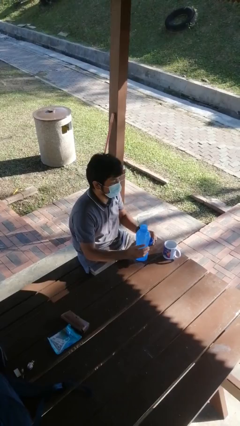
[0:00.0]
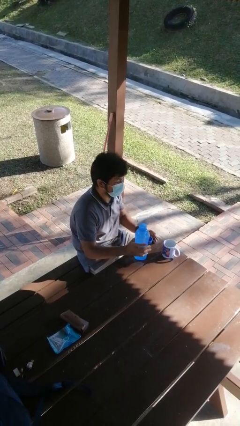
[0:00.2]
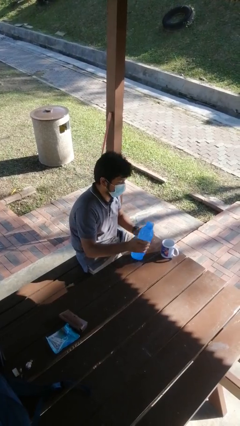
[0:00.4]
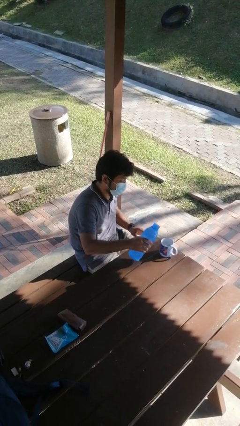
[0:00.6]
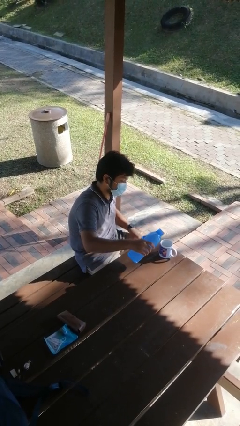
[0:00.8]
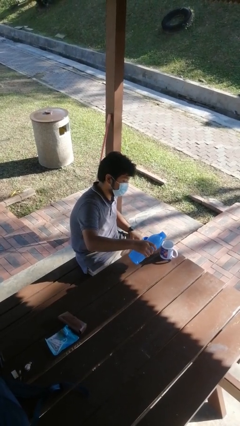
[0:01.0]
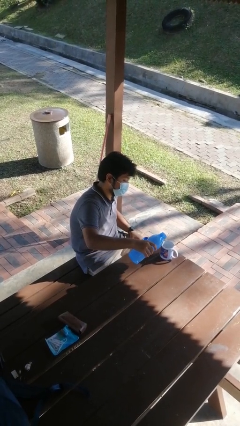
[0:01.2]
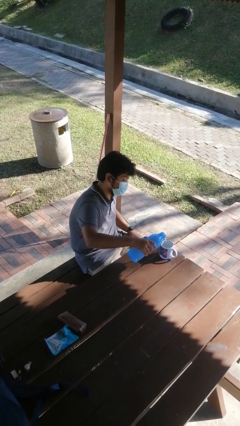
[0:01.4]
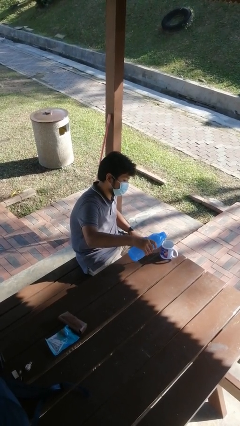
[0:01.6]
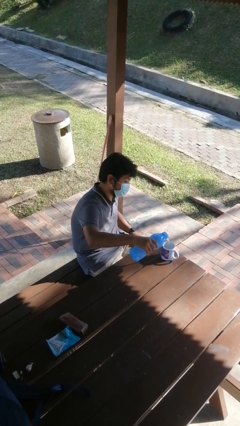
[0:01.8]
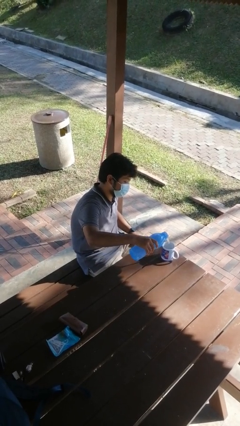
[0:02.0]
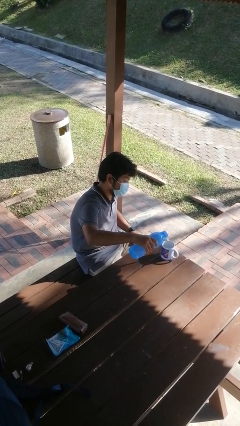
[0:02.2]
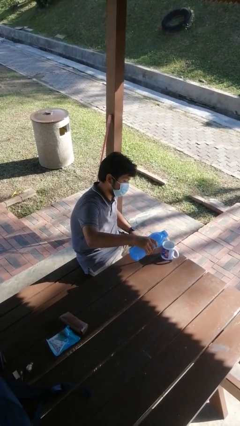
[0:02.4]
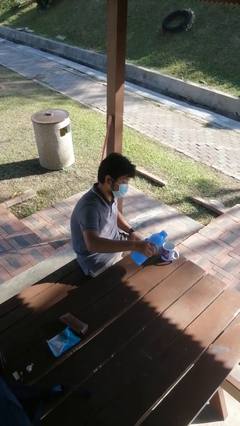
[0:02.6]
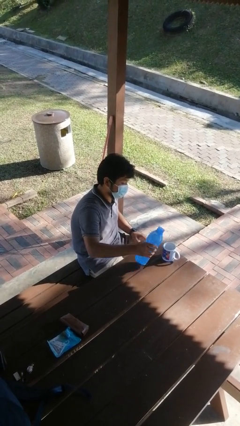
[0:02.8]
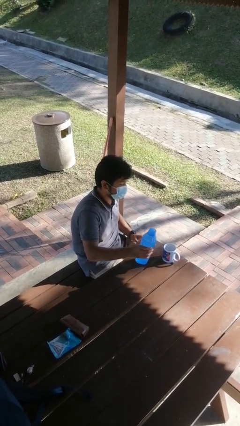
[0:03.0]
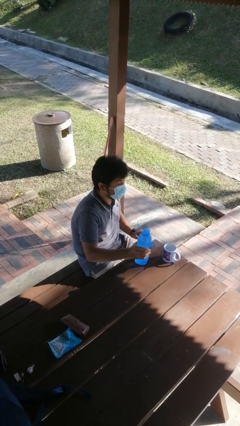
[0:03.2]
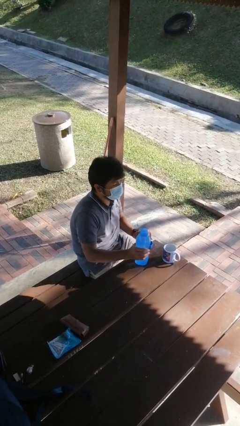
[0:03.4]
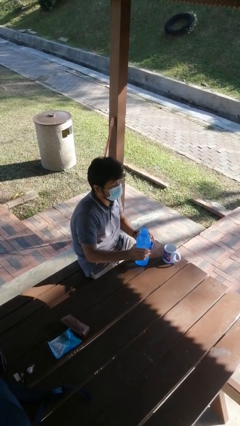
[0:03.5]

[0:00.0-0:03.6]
person pours liquid into cup

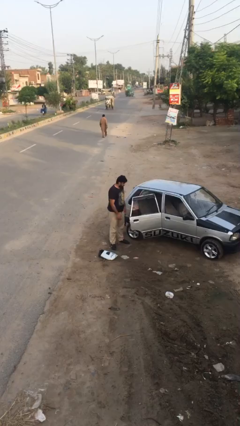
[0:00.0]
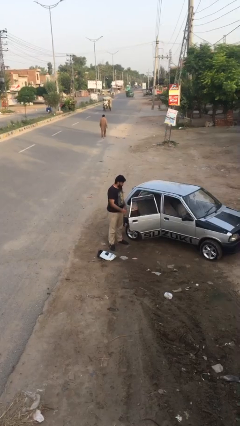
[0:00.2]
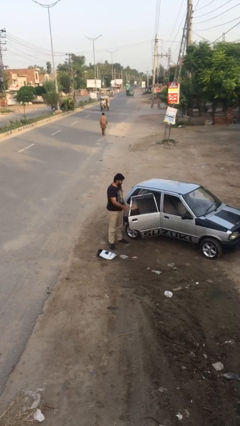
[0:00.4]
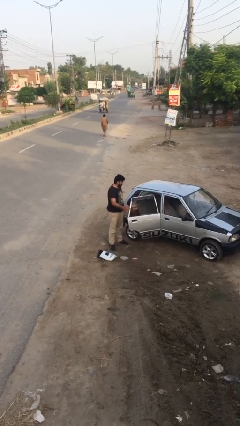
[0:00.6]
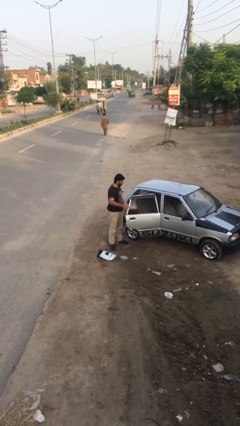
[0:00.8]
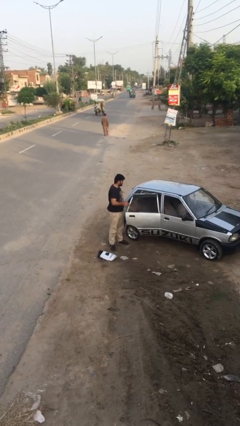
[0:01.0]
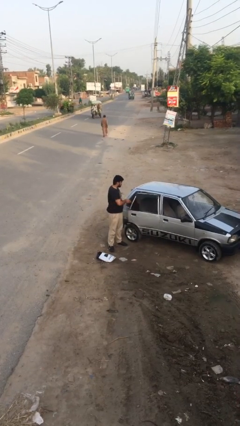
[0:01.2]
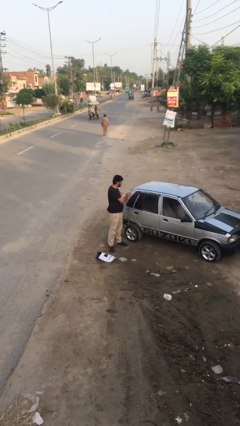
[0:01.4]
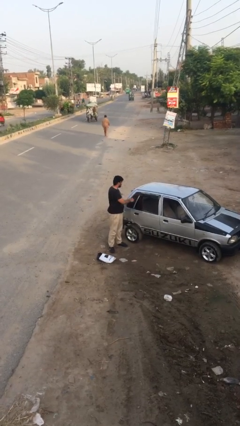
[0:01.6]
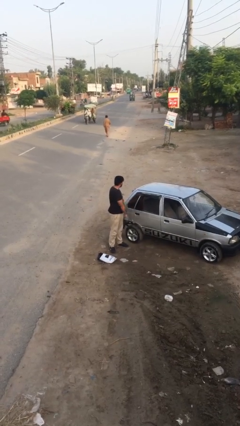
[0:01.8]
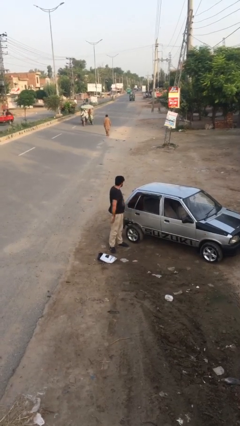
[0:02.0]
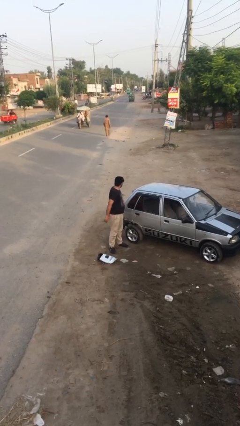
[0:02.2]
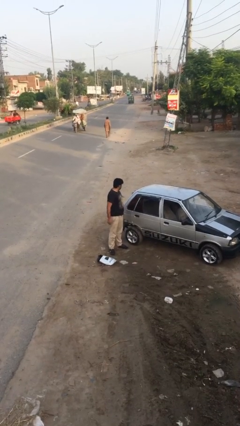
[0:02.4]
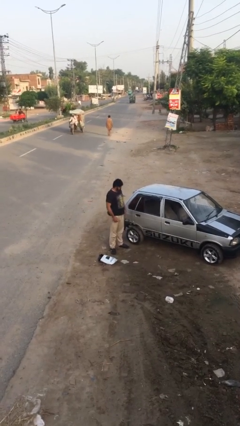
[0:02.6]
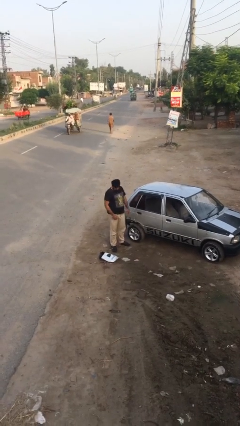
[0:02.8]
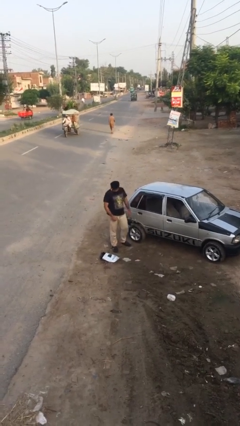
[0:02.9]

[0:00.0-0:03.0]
person closes car door

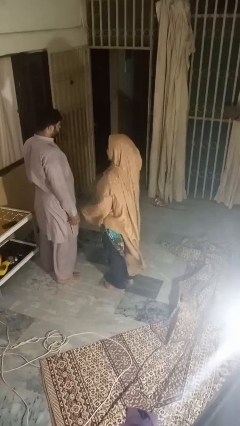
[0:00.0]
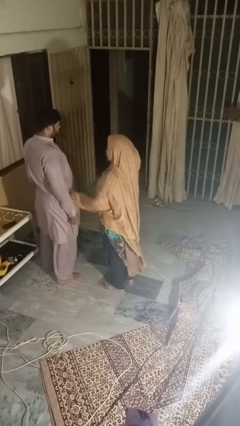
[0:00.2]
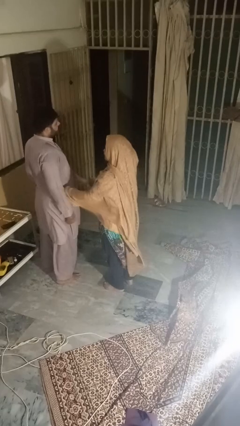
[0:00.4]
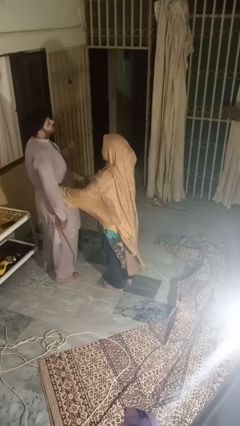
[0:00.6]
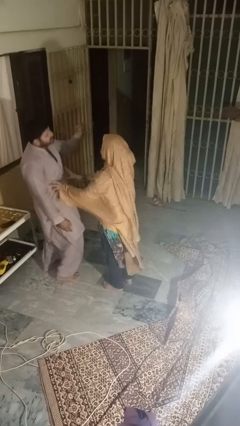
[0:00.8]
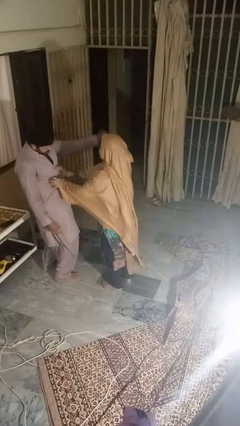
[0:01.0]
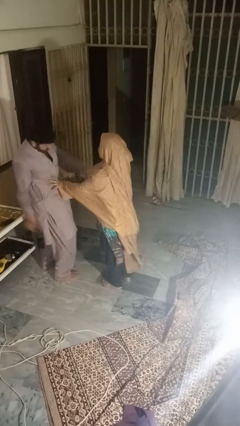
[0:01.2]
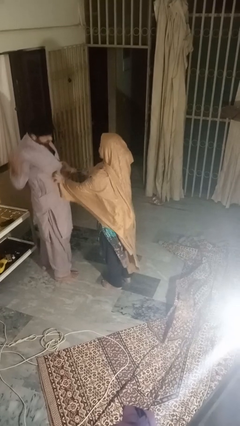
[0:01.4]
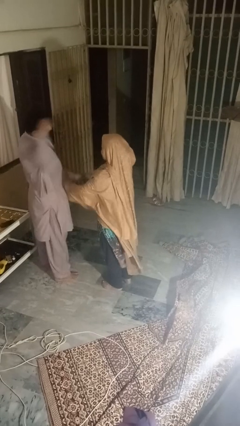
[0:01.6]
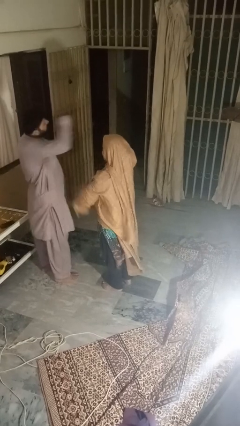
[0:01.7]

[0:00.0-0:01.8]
person tickles person

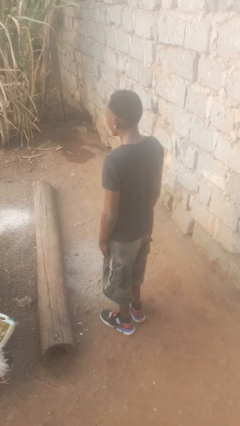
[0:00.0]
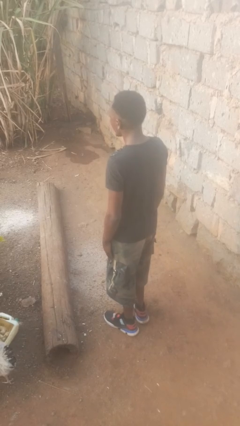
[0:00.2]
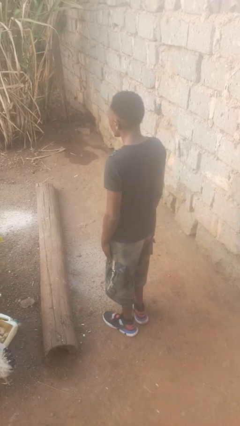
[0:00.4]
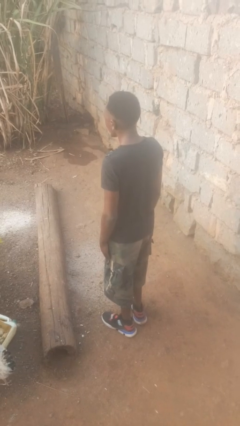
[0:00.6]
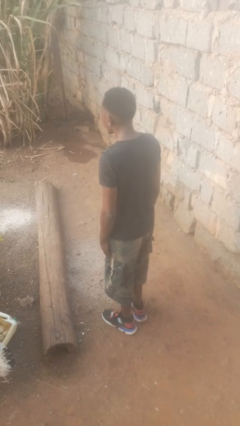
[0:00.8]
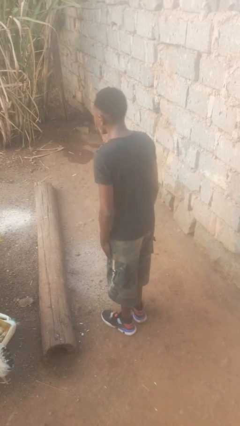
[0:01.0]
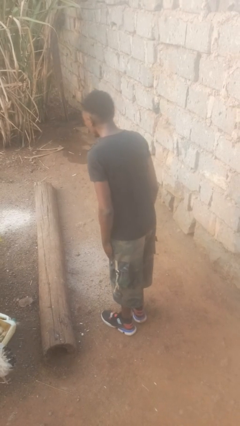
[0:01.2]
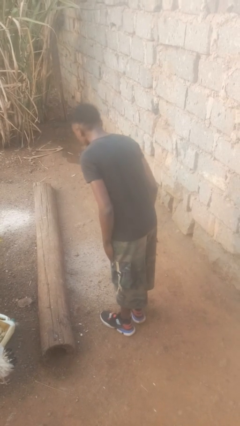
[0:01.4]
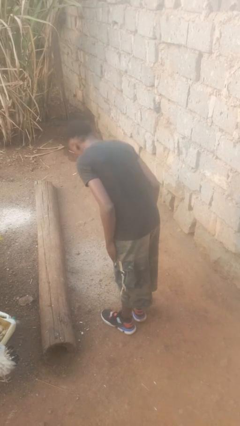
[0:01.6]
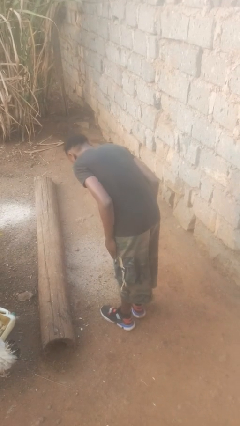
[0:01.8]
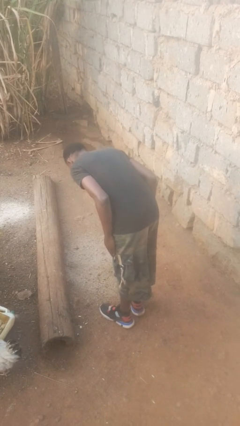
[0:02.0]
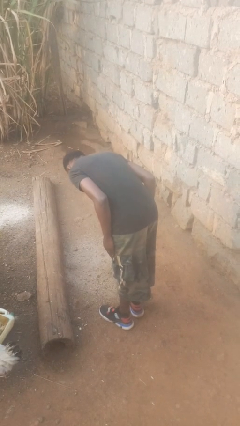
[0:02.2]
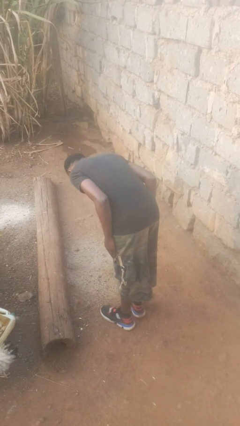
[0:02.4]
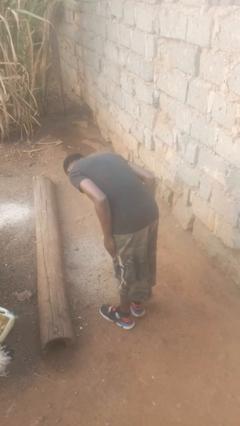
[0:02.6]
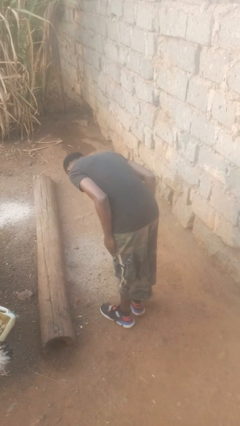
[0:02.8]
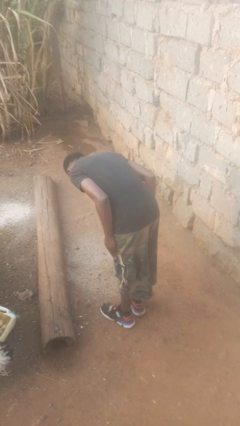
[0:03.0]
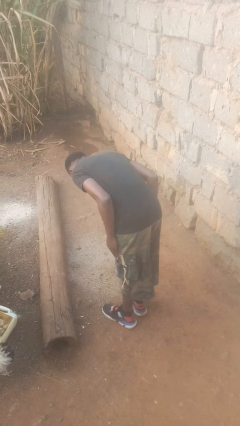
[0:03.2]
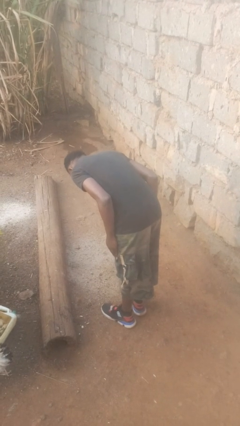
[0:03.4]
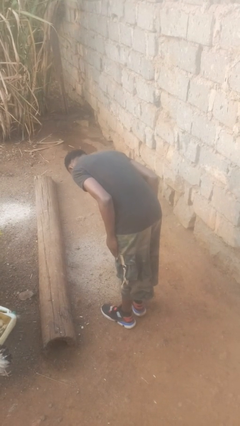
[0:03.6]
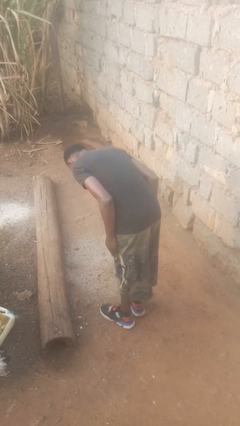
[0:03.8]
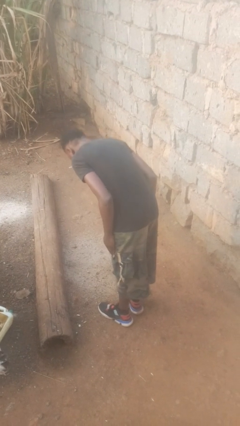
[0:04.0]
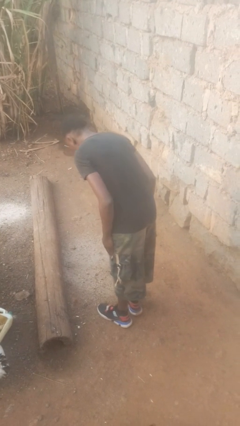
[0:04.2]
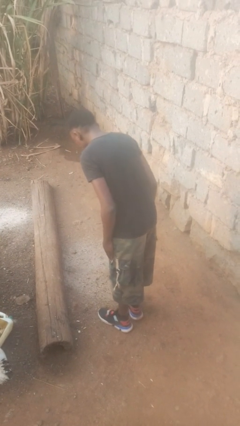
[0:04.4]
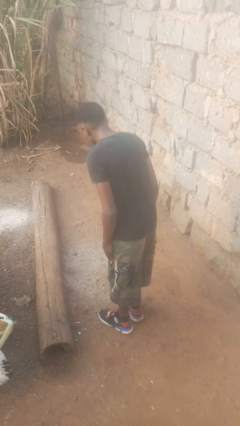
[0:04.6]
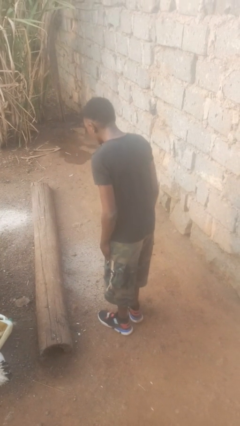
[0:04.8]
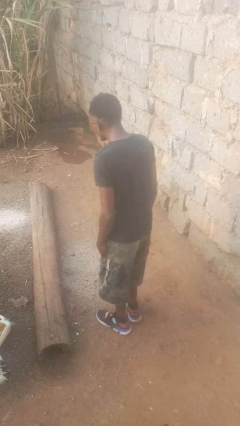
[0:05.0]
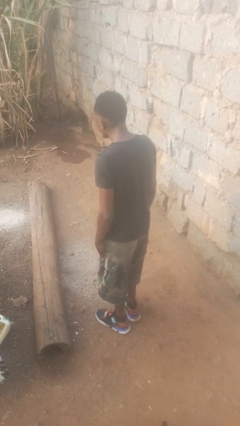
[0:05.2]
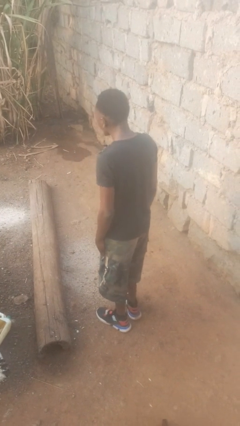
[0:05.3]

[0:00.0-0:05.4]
person bows

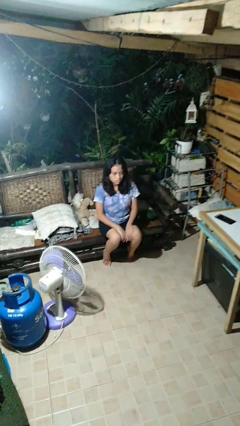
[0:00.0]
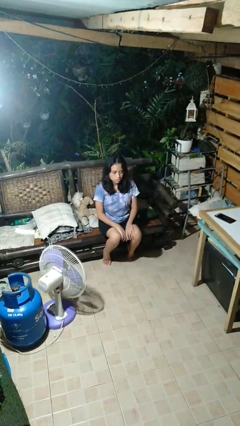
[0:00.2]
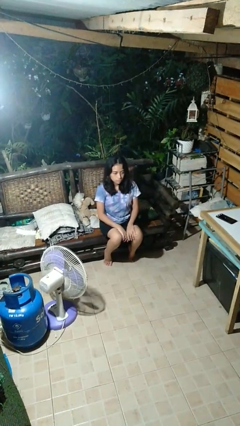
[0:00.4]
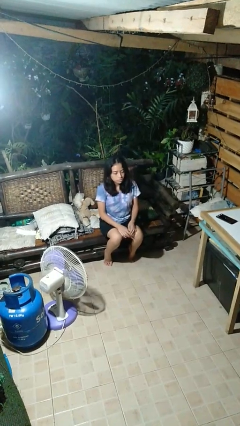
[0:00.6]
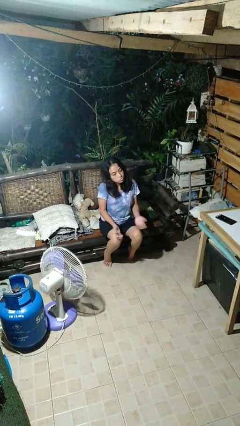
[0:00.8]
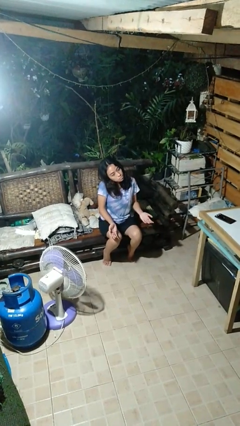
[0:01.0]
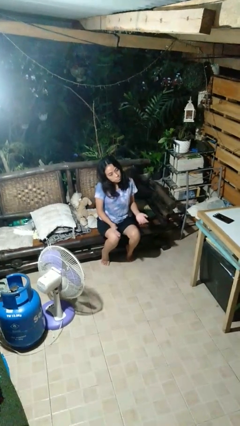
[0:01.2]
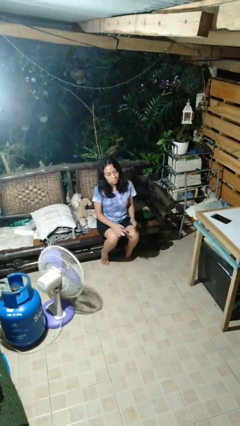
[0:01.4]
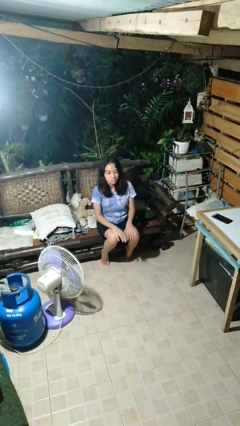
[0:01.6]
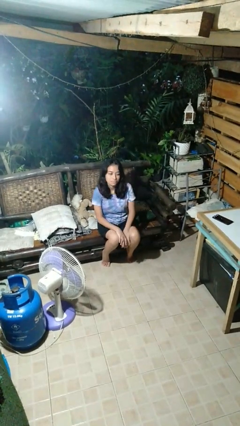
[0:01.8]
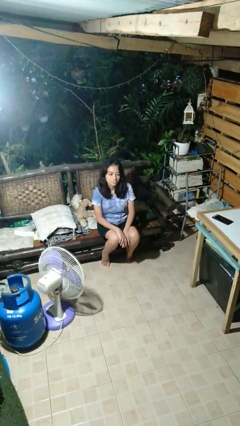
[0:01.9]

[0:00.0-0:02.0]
person shrugs

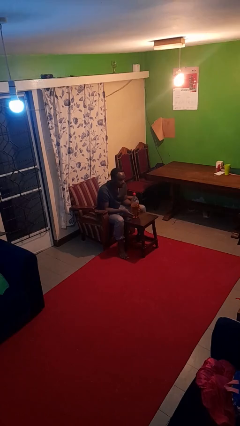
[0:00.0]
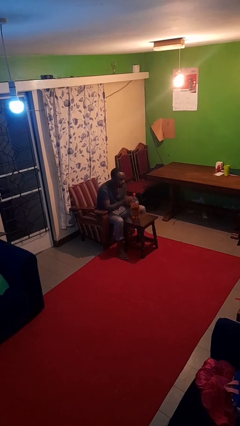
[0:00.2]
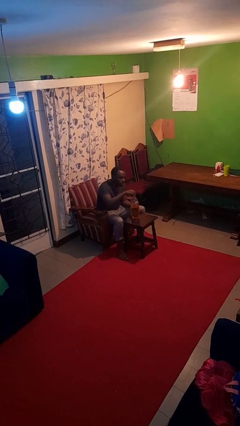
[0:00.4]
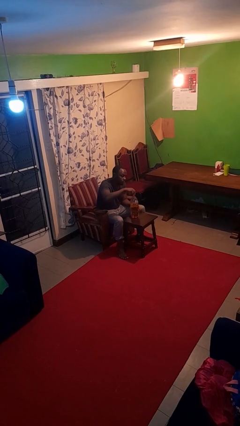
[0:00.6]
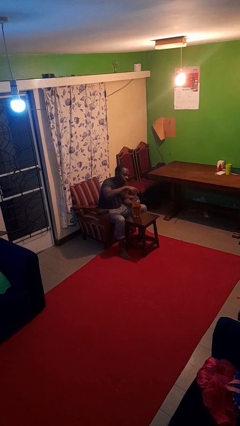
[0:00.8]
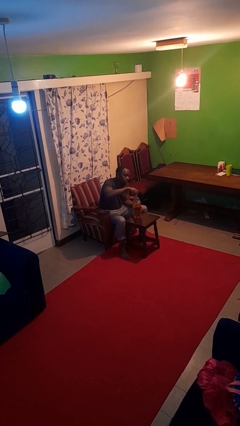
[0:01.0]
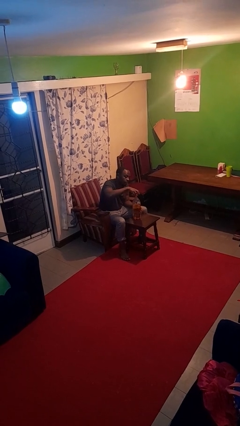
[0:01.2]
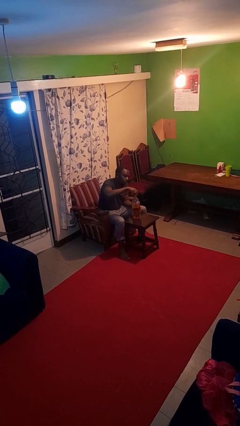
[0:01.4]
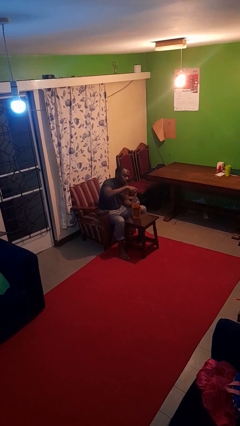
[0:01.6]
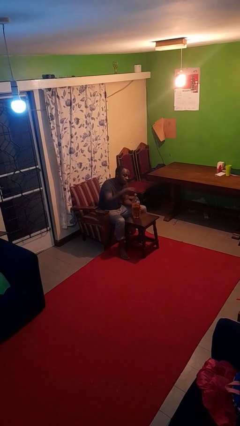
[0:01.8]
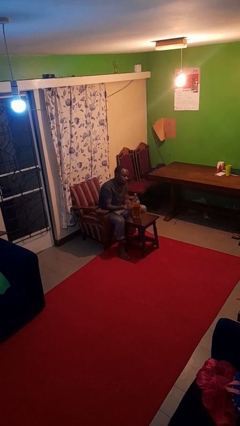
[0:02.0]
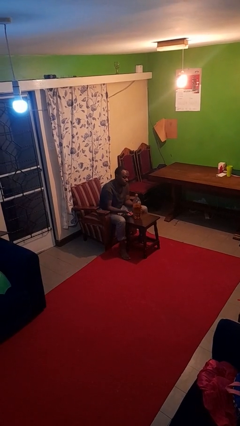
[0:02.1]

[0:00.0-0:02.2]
person unscrews lid from bottle
